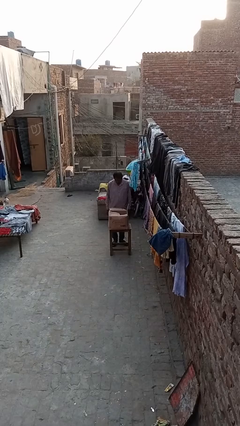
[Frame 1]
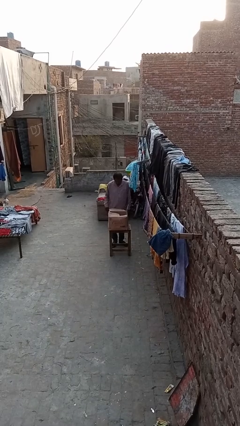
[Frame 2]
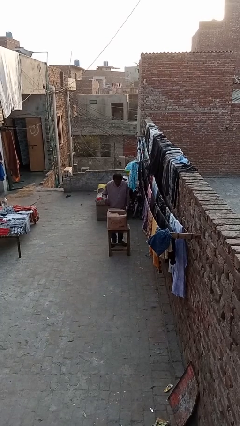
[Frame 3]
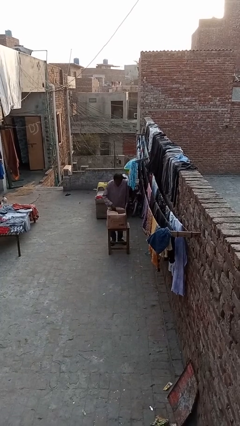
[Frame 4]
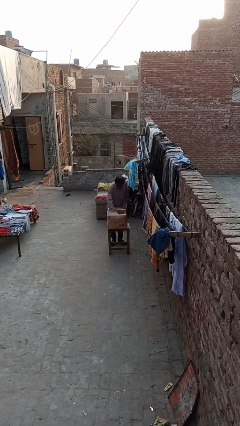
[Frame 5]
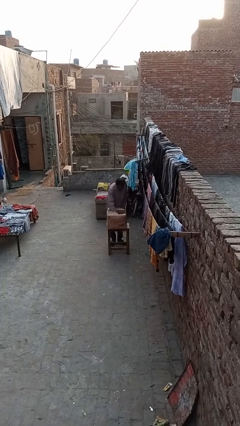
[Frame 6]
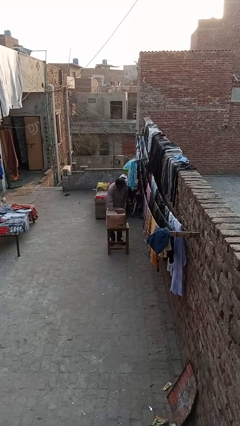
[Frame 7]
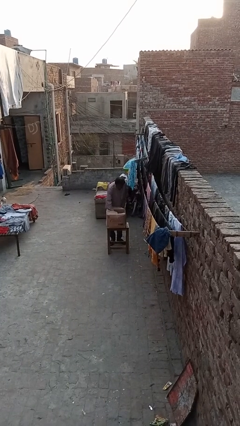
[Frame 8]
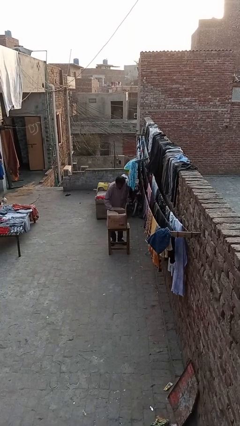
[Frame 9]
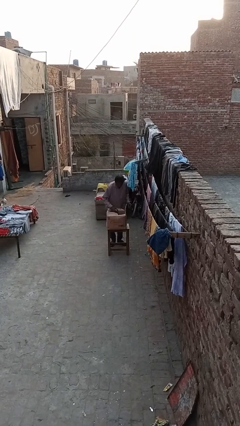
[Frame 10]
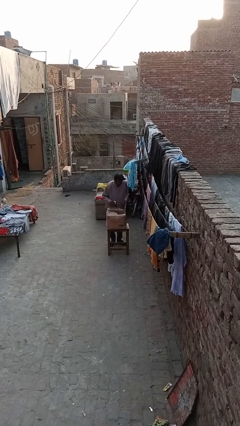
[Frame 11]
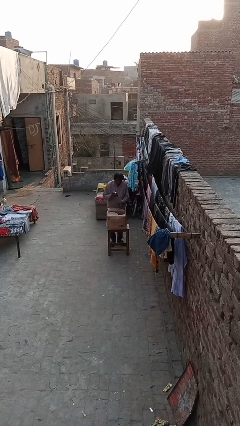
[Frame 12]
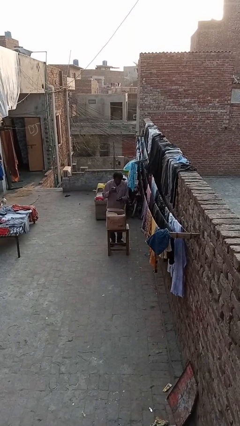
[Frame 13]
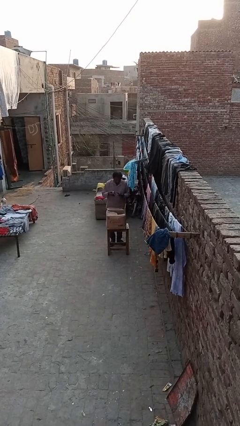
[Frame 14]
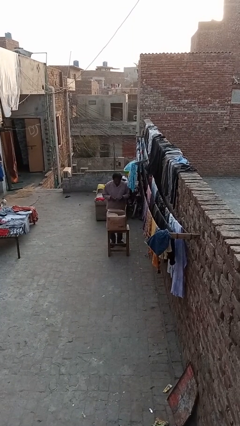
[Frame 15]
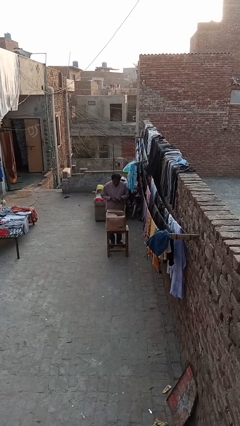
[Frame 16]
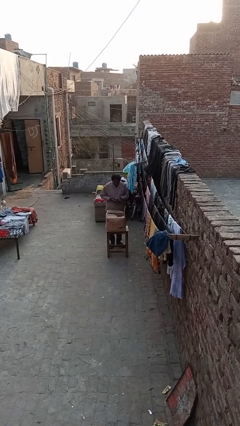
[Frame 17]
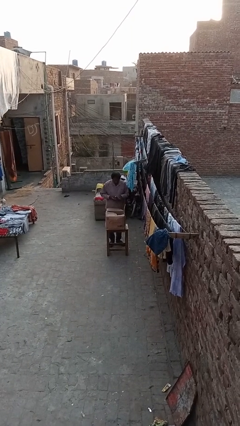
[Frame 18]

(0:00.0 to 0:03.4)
person takes object from box

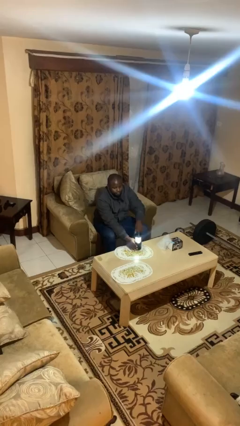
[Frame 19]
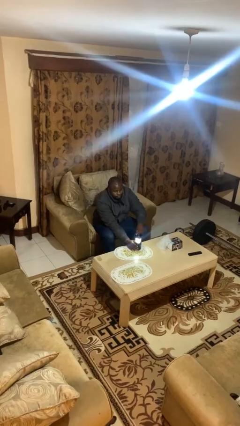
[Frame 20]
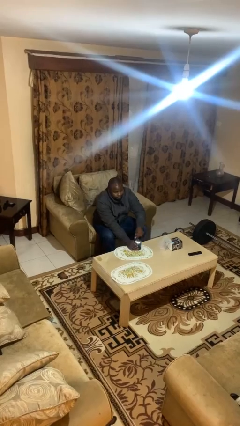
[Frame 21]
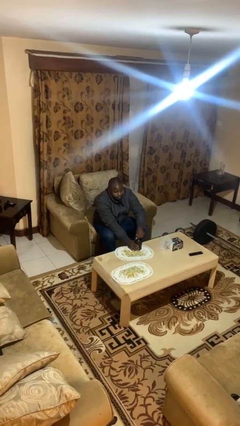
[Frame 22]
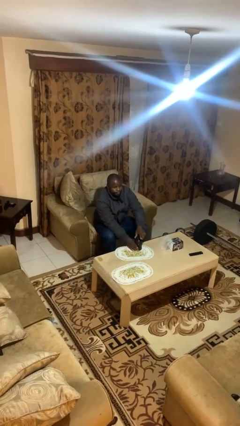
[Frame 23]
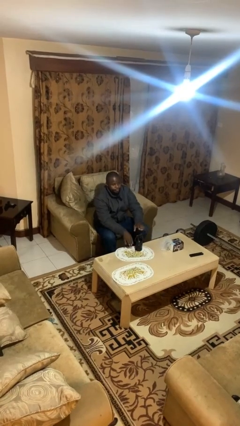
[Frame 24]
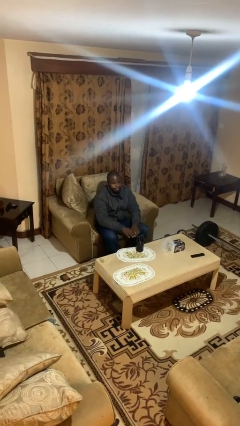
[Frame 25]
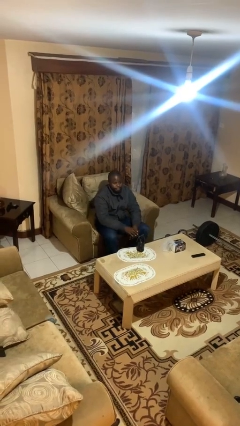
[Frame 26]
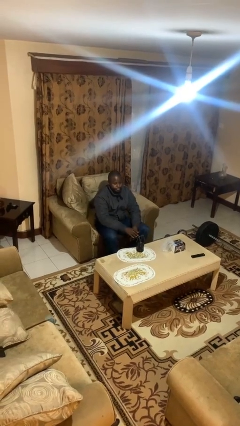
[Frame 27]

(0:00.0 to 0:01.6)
person turns off lamp

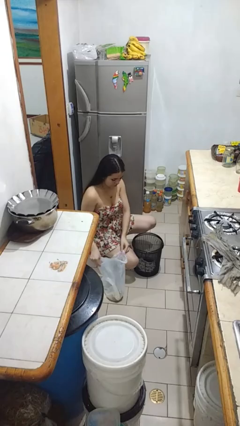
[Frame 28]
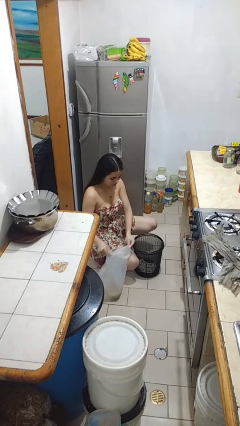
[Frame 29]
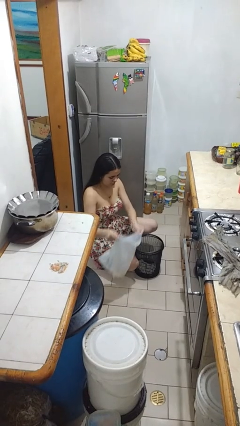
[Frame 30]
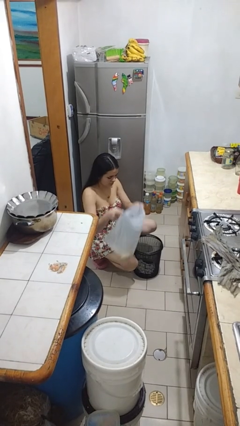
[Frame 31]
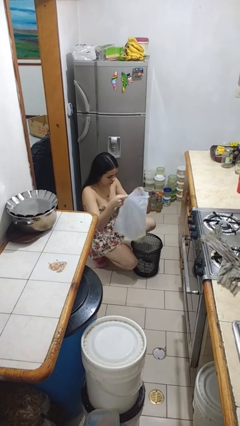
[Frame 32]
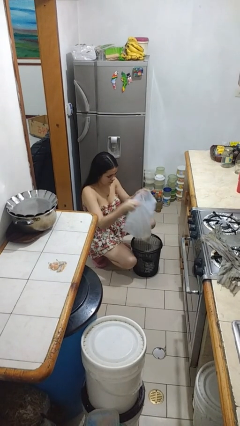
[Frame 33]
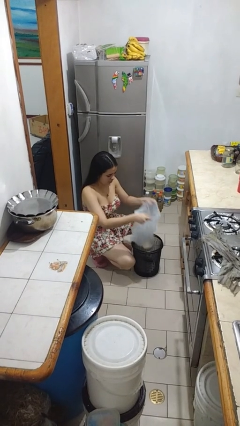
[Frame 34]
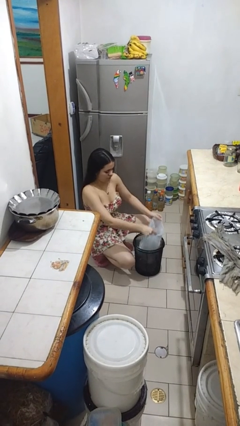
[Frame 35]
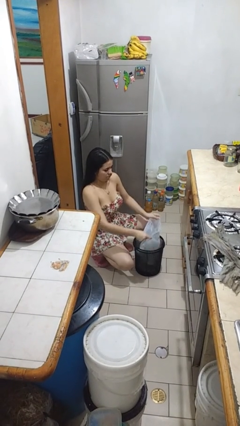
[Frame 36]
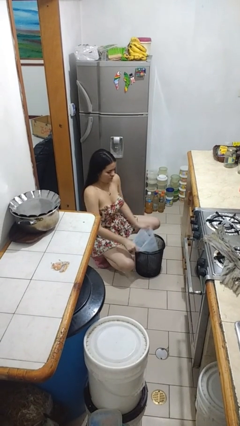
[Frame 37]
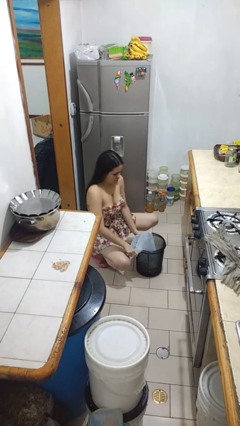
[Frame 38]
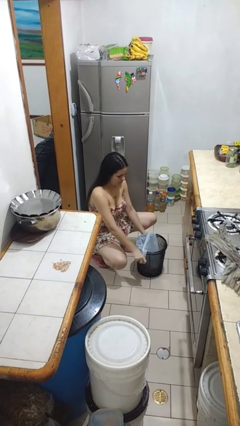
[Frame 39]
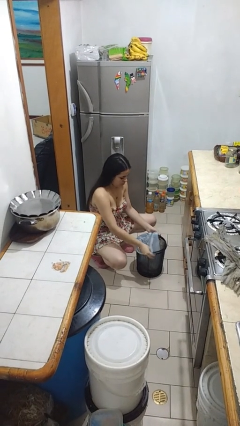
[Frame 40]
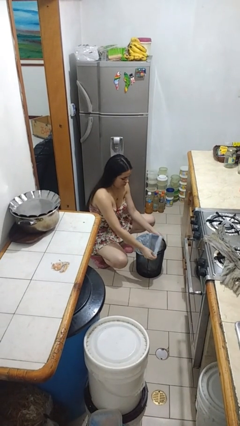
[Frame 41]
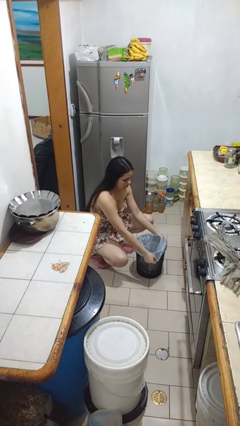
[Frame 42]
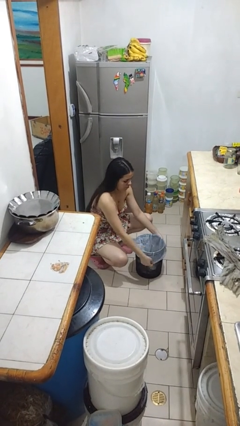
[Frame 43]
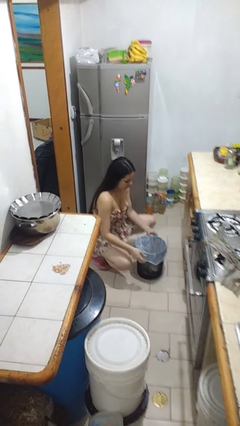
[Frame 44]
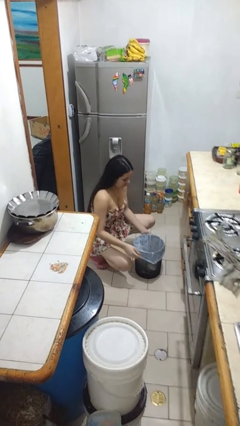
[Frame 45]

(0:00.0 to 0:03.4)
person inserts trashbag into trashcan

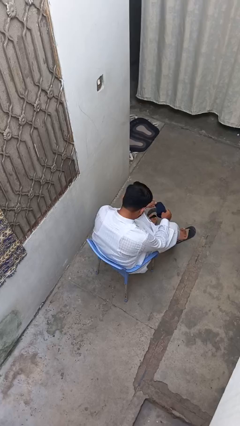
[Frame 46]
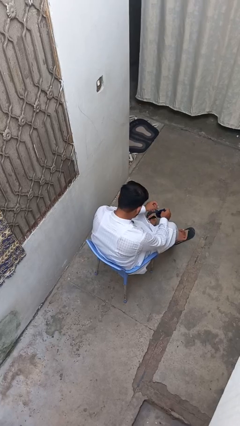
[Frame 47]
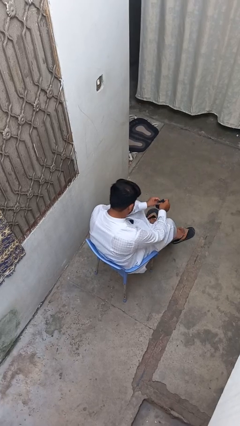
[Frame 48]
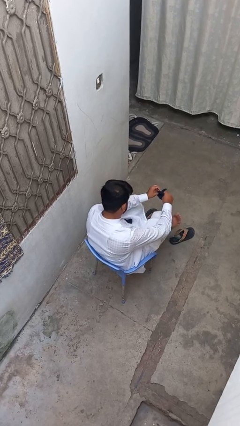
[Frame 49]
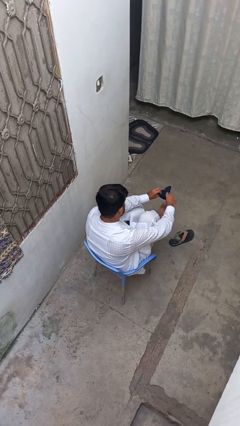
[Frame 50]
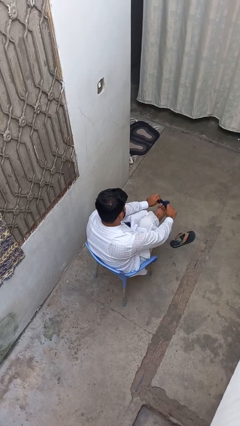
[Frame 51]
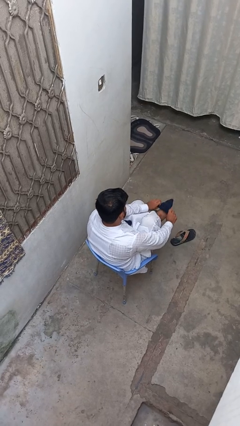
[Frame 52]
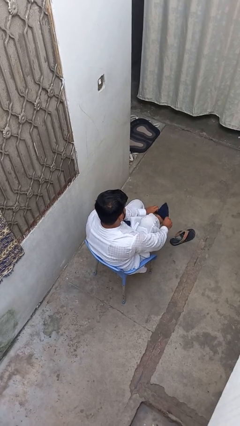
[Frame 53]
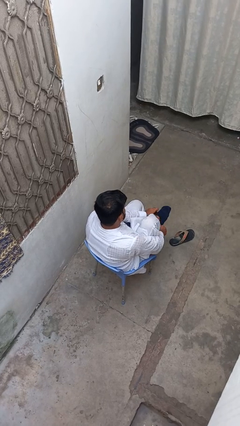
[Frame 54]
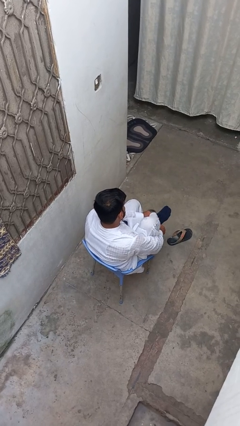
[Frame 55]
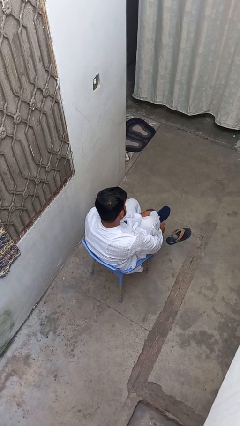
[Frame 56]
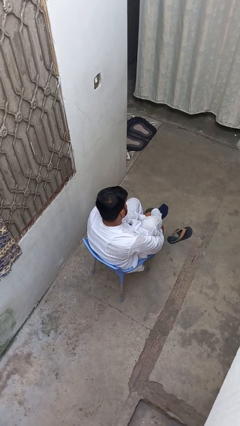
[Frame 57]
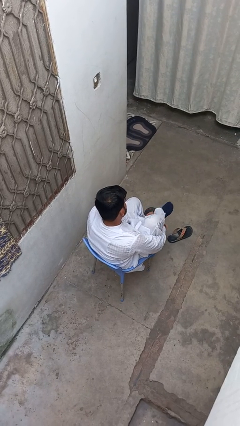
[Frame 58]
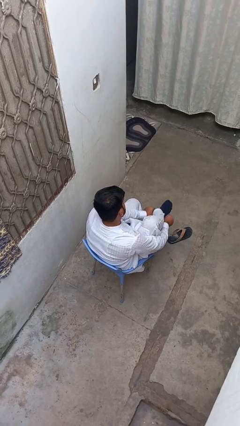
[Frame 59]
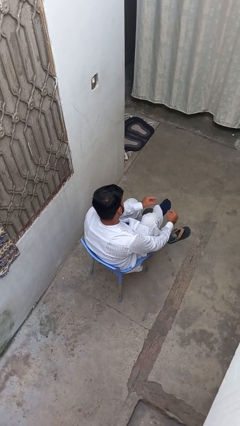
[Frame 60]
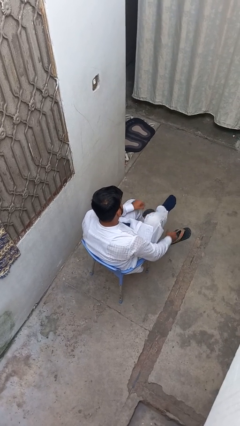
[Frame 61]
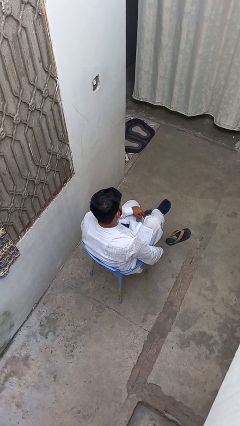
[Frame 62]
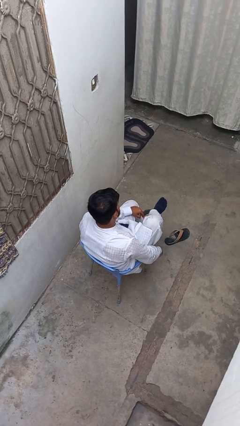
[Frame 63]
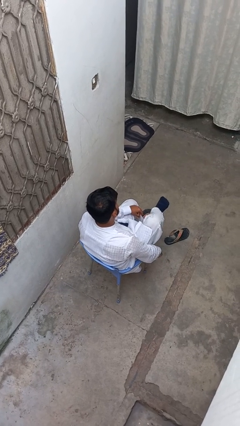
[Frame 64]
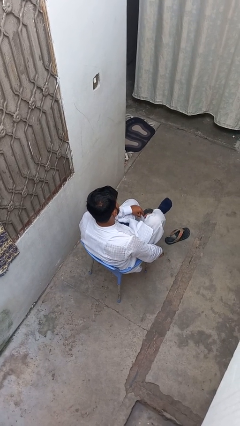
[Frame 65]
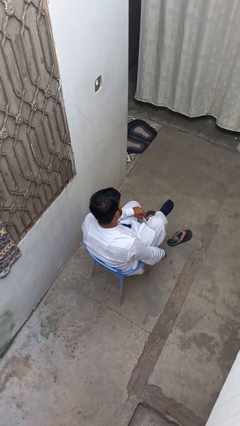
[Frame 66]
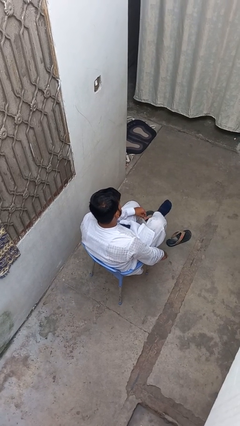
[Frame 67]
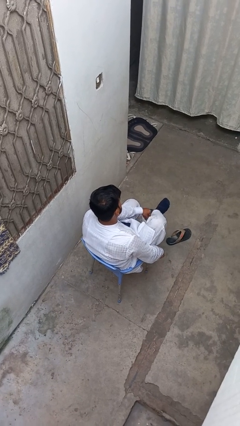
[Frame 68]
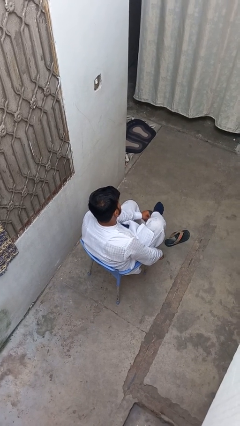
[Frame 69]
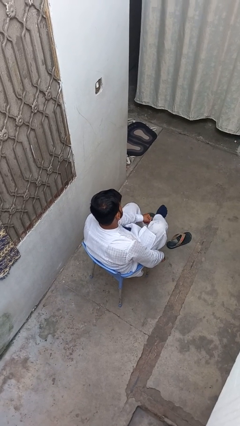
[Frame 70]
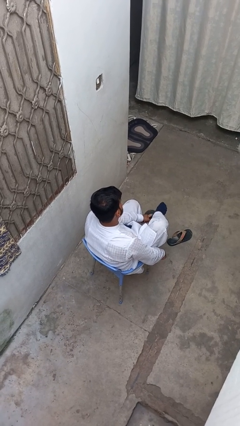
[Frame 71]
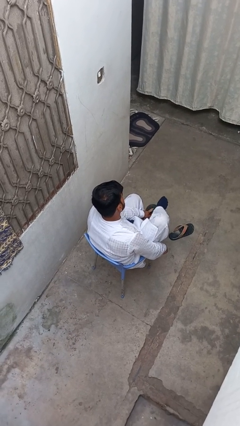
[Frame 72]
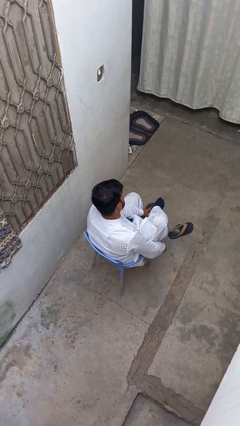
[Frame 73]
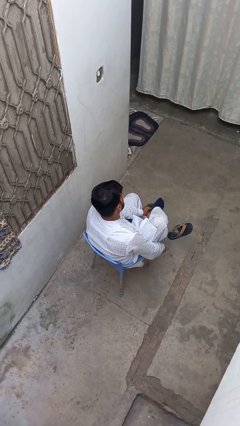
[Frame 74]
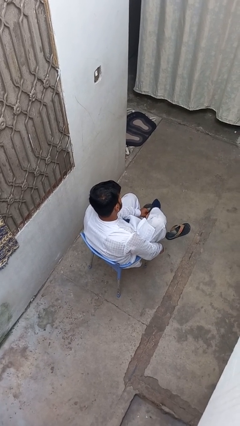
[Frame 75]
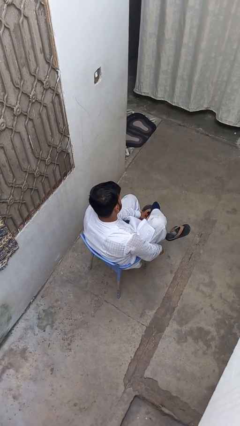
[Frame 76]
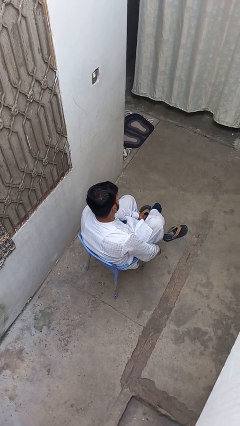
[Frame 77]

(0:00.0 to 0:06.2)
person puts on socks

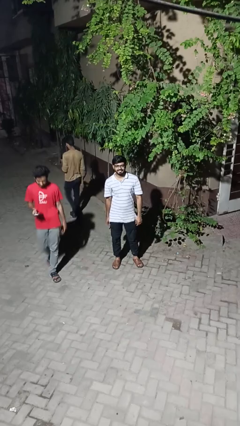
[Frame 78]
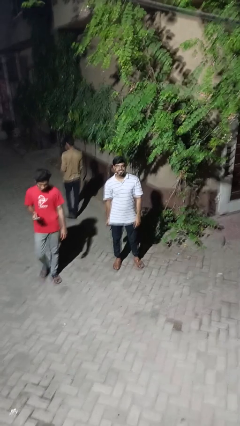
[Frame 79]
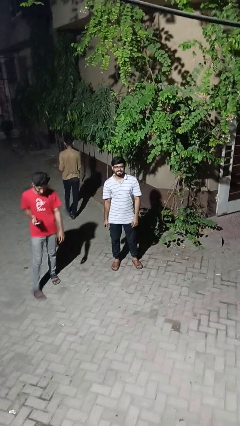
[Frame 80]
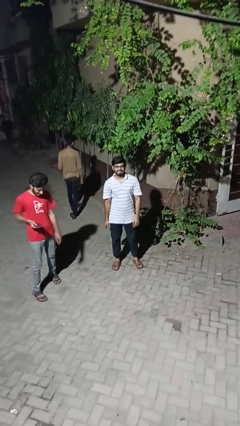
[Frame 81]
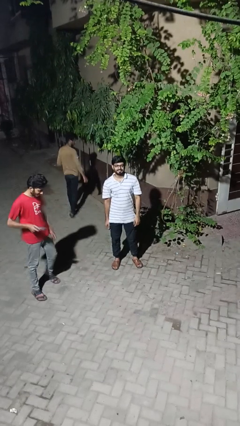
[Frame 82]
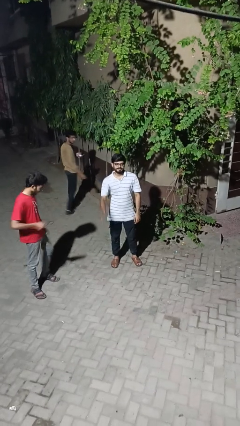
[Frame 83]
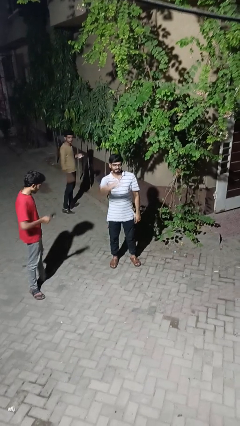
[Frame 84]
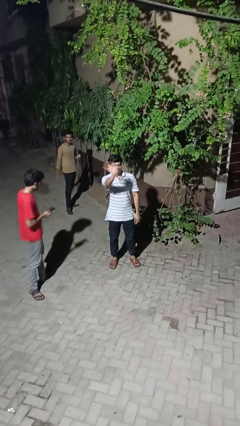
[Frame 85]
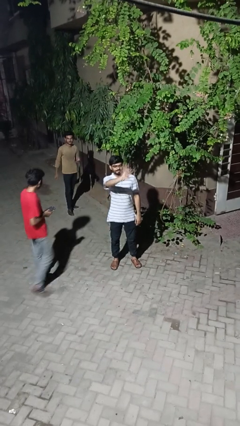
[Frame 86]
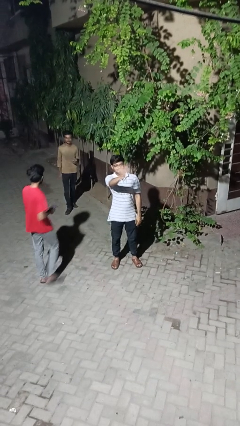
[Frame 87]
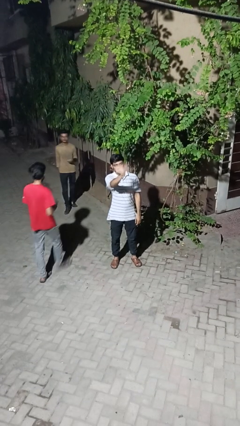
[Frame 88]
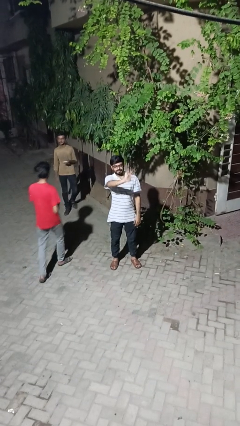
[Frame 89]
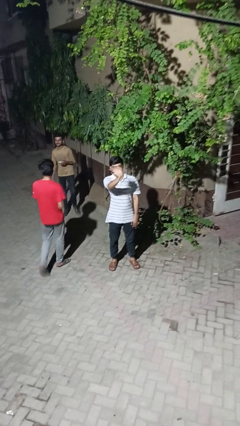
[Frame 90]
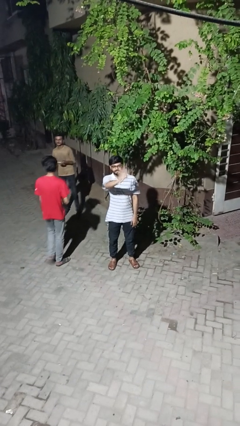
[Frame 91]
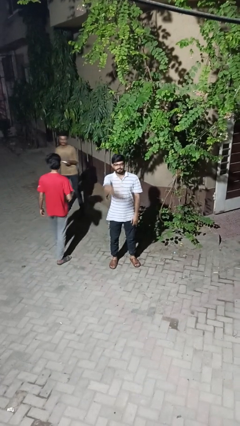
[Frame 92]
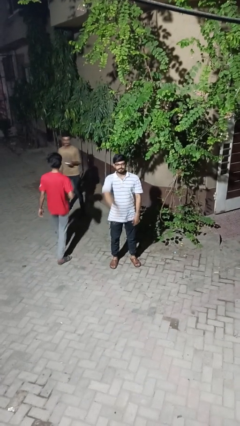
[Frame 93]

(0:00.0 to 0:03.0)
person waves at person
